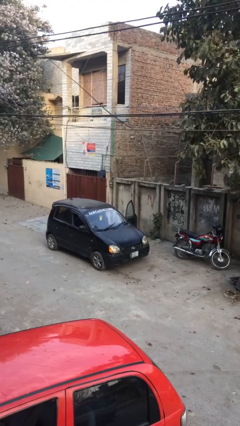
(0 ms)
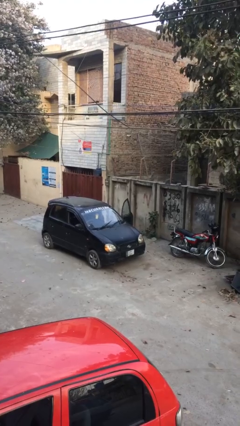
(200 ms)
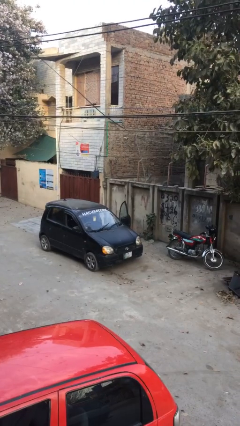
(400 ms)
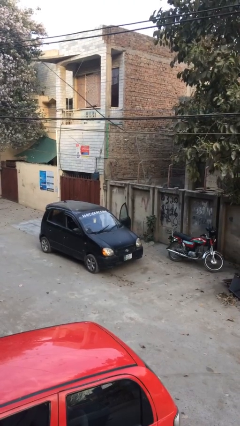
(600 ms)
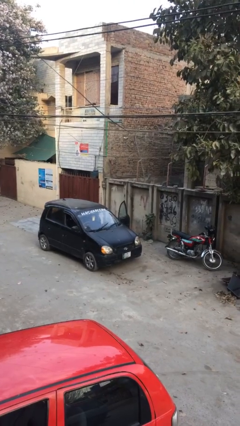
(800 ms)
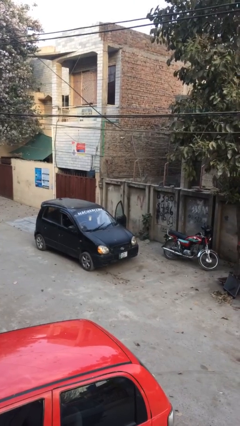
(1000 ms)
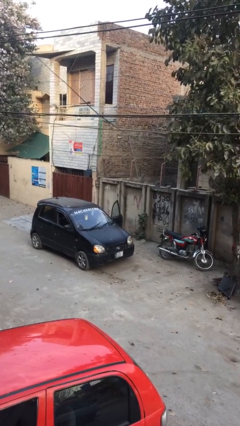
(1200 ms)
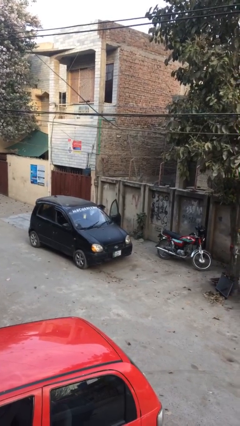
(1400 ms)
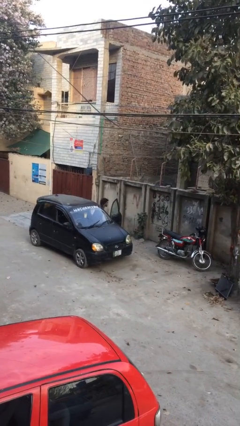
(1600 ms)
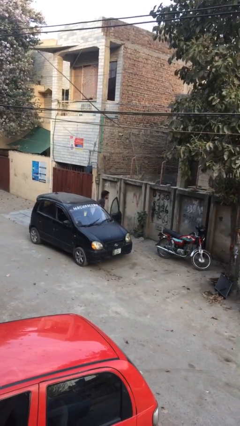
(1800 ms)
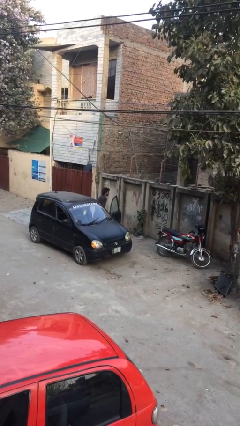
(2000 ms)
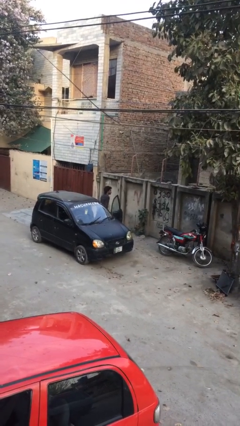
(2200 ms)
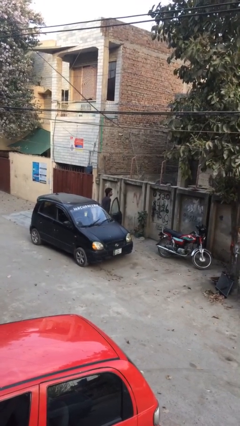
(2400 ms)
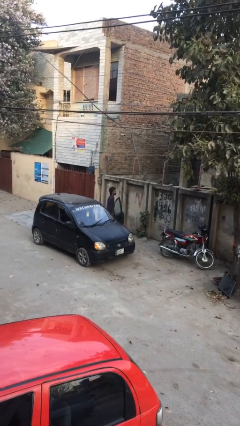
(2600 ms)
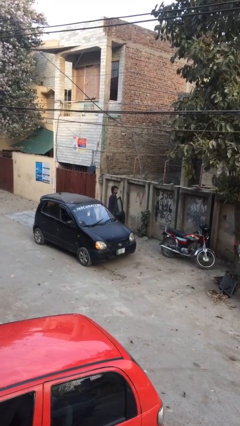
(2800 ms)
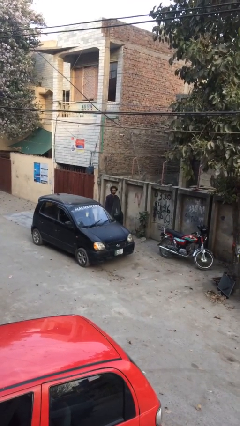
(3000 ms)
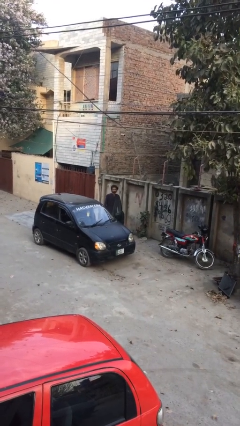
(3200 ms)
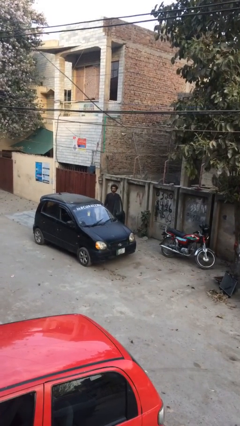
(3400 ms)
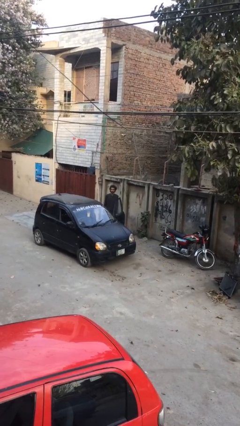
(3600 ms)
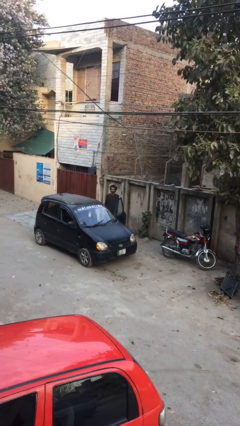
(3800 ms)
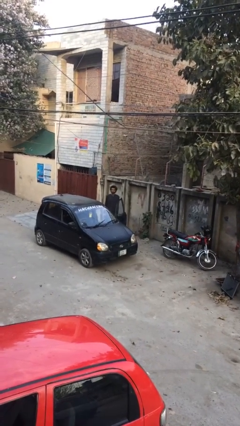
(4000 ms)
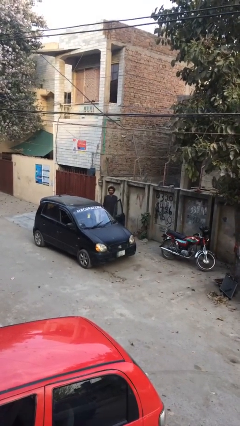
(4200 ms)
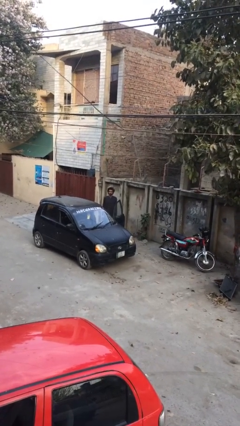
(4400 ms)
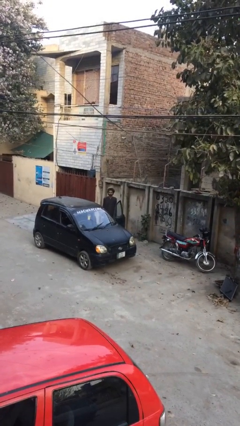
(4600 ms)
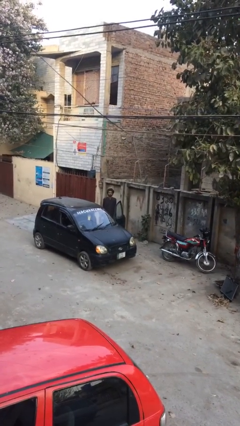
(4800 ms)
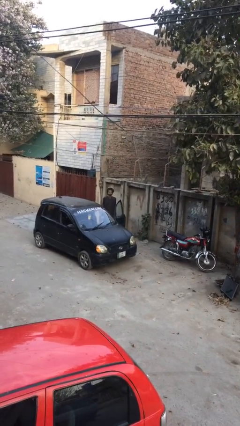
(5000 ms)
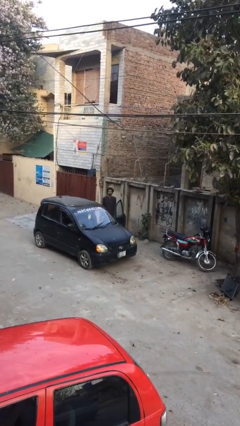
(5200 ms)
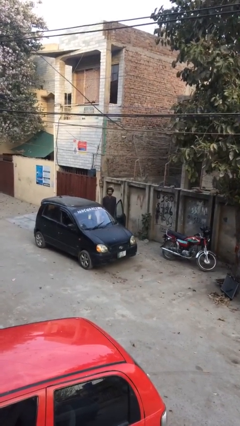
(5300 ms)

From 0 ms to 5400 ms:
person exits car

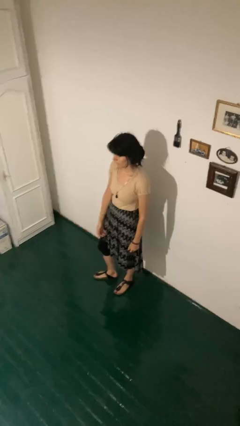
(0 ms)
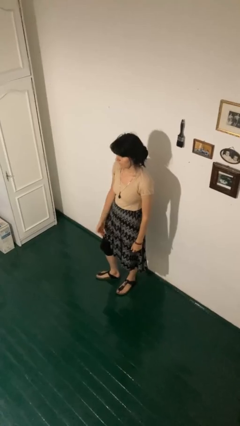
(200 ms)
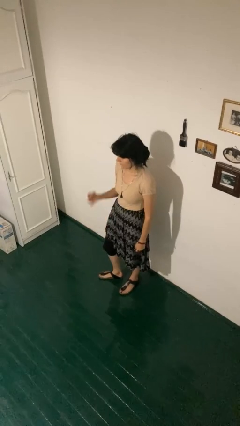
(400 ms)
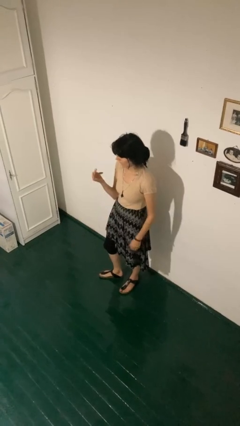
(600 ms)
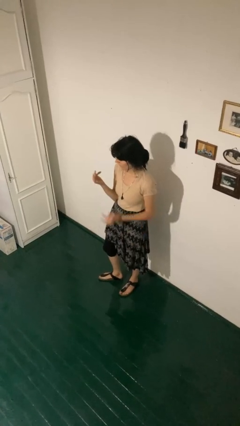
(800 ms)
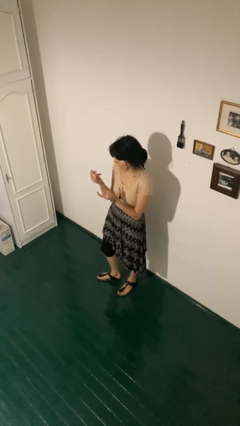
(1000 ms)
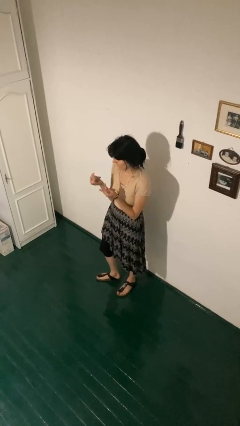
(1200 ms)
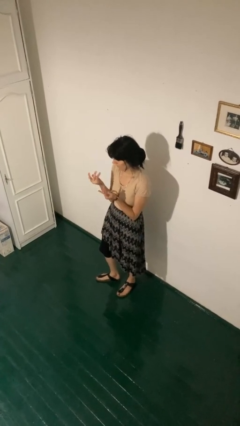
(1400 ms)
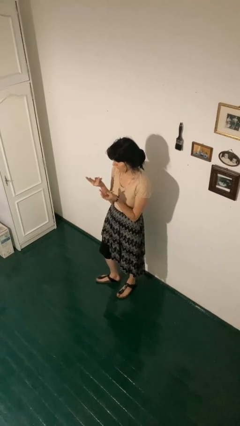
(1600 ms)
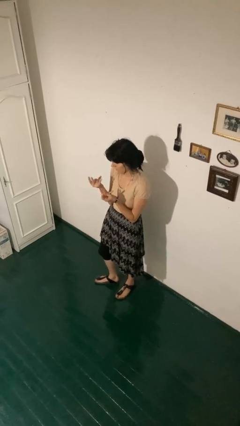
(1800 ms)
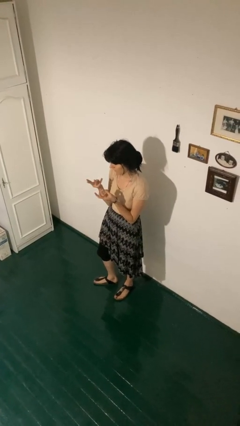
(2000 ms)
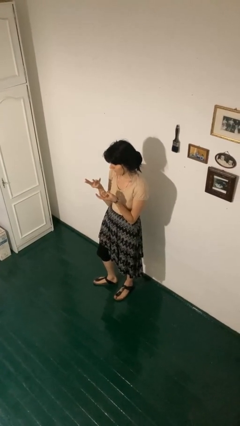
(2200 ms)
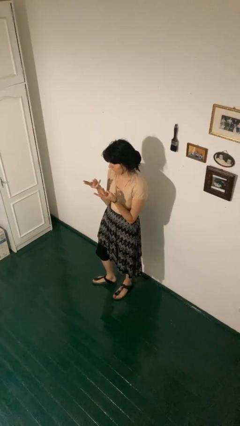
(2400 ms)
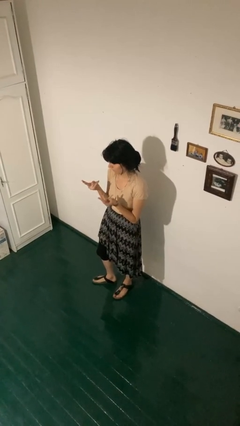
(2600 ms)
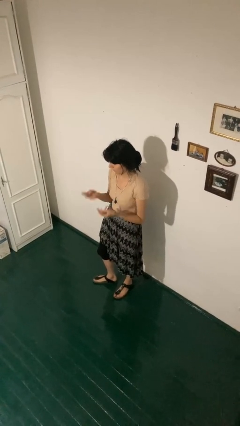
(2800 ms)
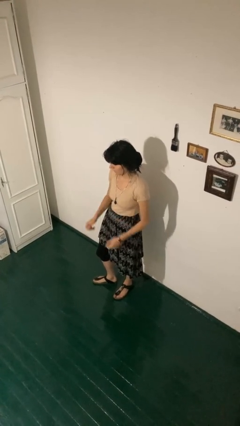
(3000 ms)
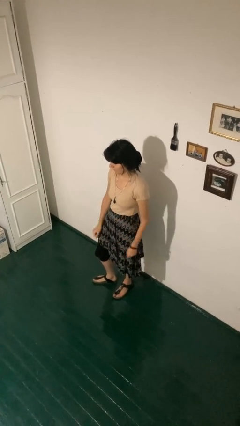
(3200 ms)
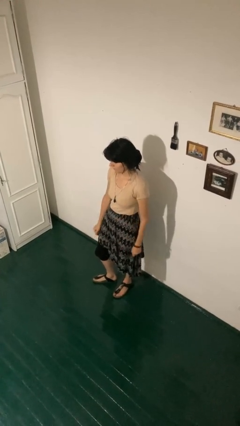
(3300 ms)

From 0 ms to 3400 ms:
person cracks knuckles

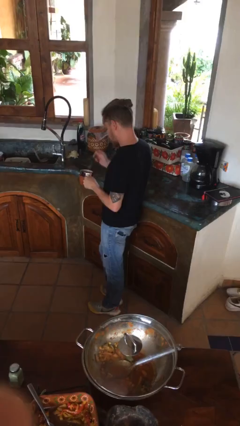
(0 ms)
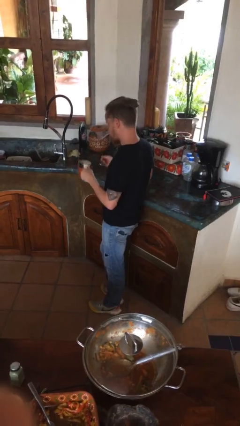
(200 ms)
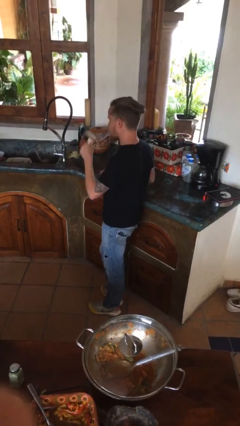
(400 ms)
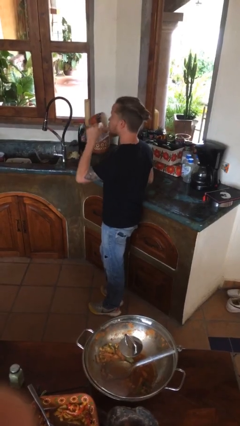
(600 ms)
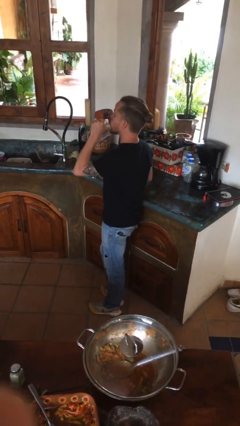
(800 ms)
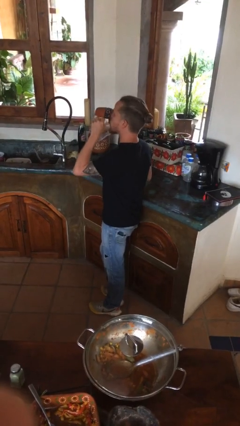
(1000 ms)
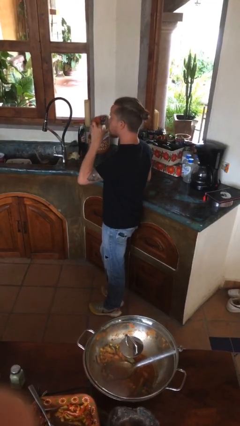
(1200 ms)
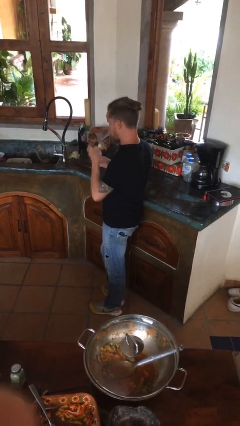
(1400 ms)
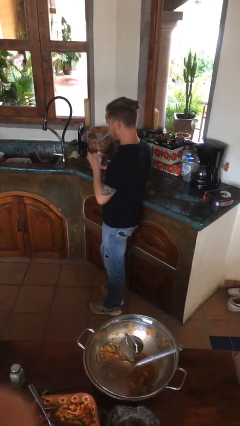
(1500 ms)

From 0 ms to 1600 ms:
person drinks from mug

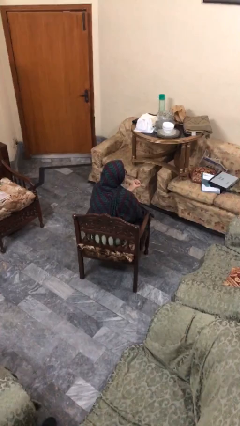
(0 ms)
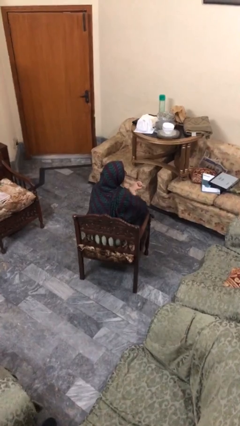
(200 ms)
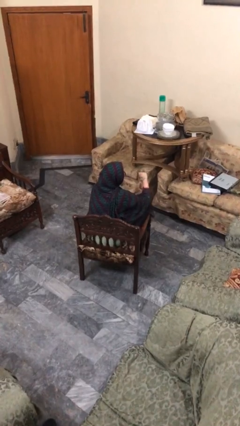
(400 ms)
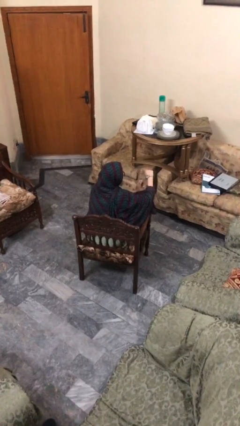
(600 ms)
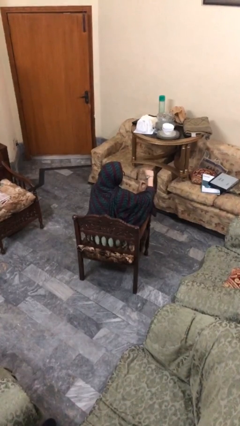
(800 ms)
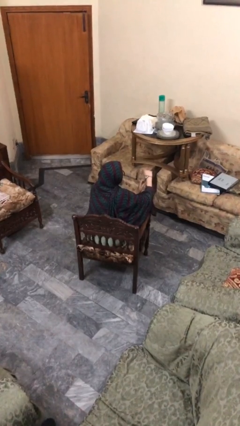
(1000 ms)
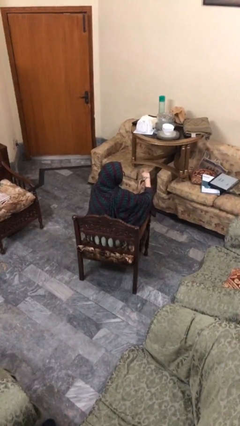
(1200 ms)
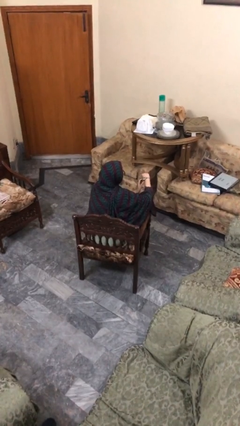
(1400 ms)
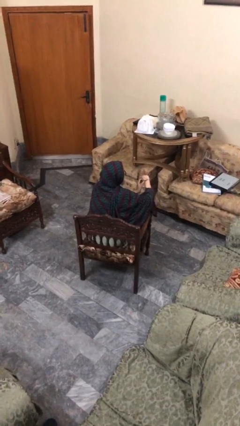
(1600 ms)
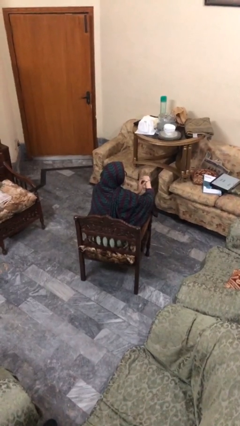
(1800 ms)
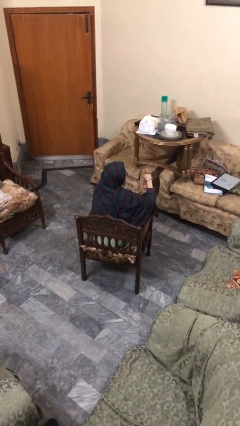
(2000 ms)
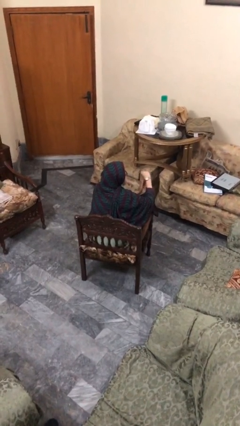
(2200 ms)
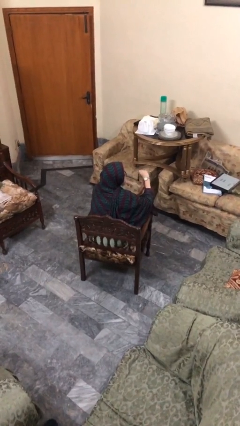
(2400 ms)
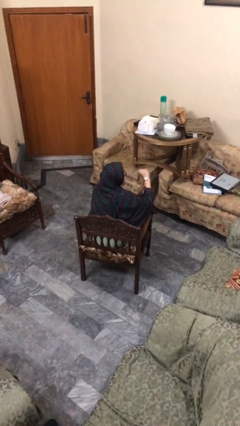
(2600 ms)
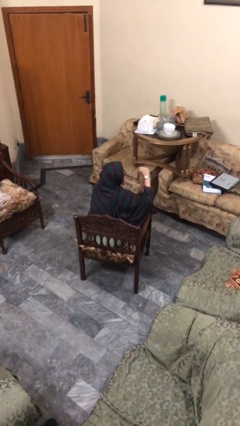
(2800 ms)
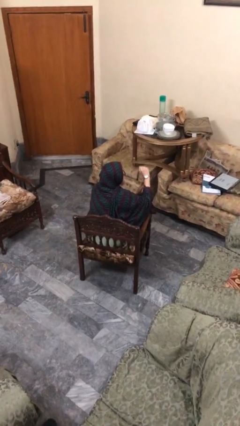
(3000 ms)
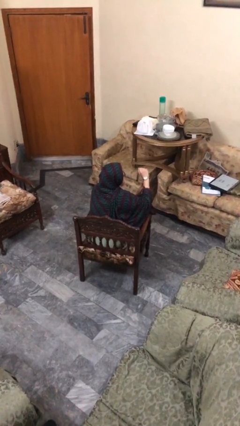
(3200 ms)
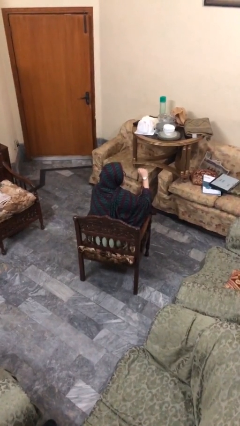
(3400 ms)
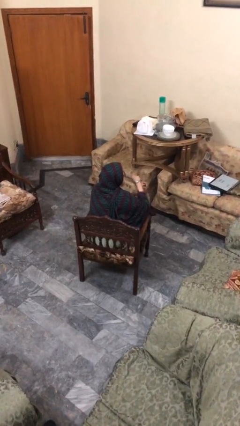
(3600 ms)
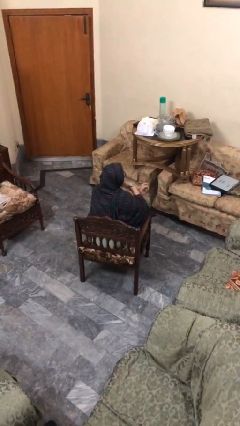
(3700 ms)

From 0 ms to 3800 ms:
person looks at wristwatch

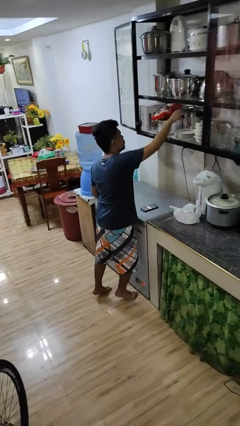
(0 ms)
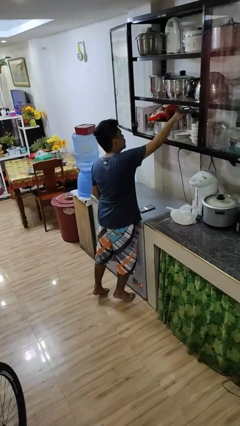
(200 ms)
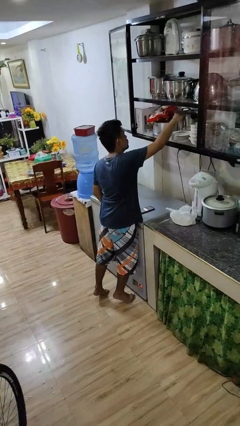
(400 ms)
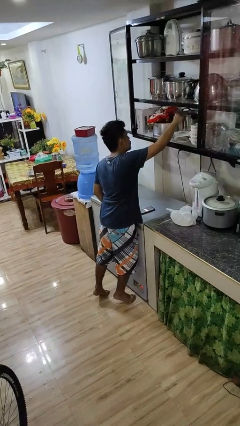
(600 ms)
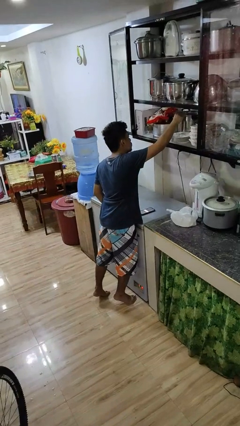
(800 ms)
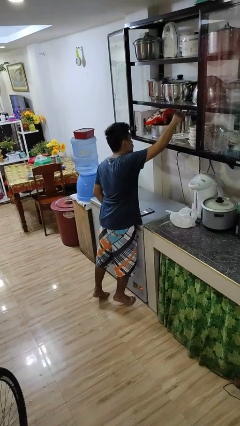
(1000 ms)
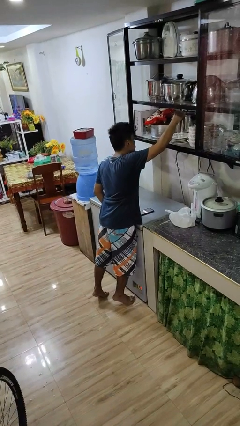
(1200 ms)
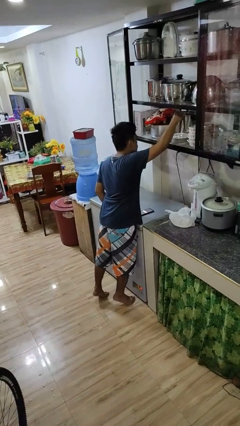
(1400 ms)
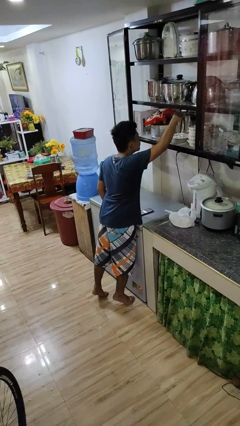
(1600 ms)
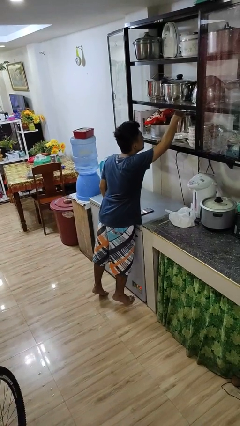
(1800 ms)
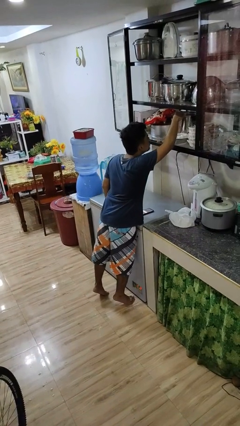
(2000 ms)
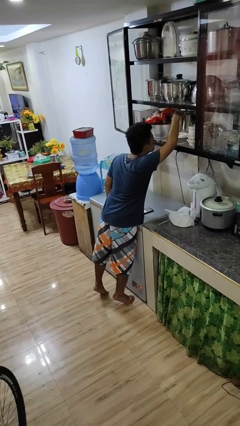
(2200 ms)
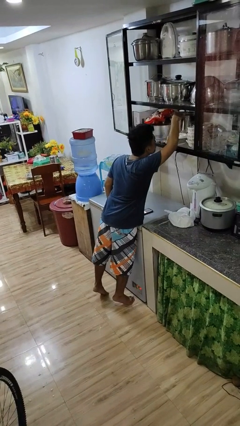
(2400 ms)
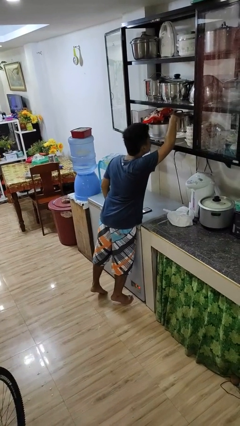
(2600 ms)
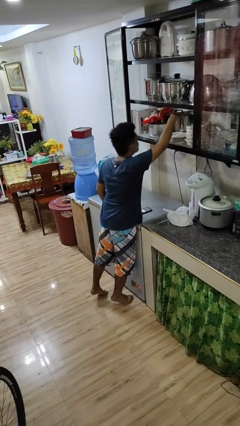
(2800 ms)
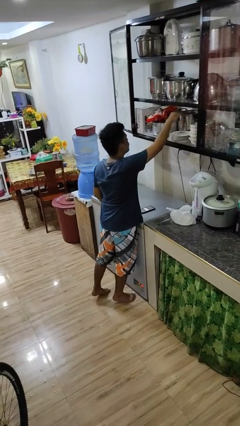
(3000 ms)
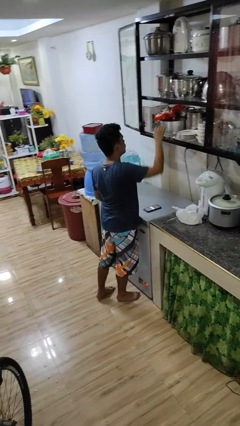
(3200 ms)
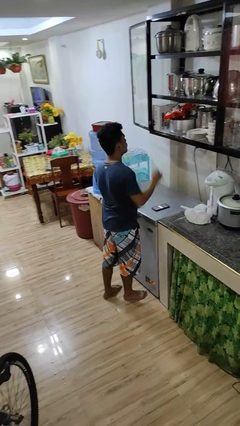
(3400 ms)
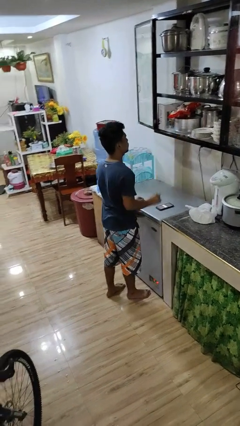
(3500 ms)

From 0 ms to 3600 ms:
person searches in cabinet
